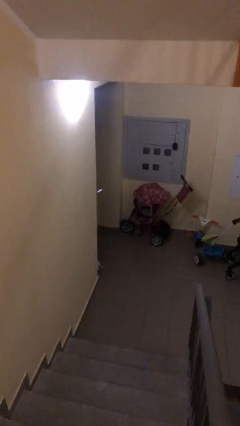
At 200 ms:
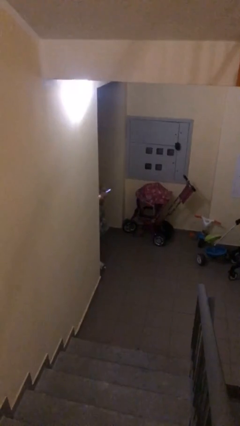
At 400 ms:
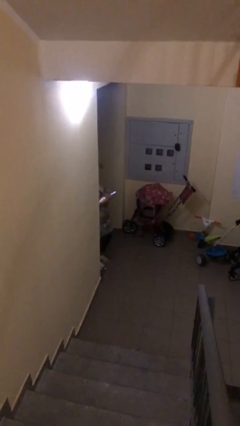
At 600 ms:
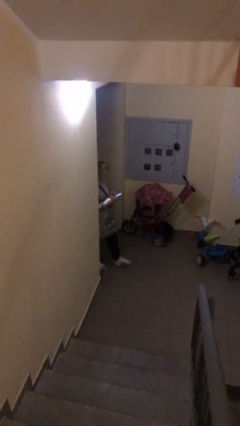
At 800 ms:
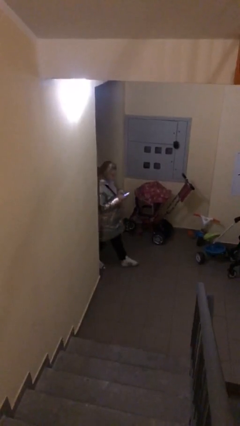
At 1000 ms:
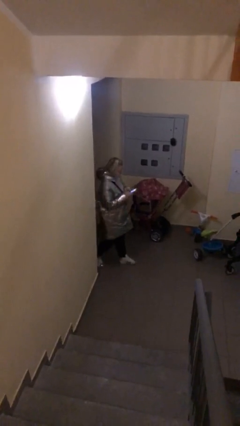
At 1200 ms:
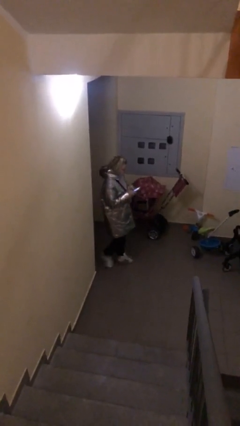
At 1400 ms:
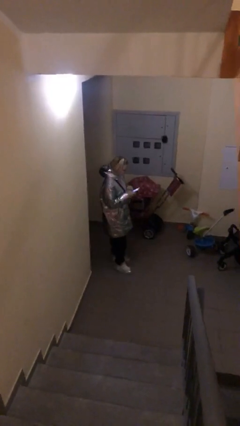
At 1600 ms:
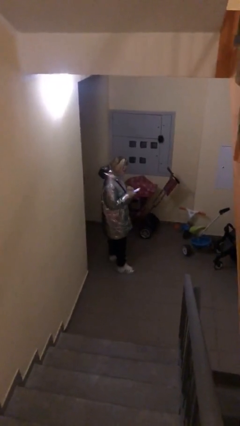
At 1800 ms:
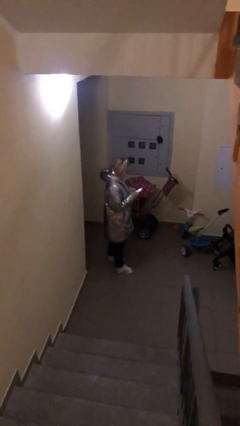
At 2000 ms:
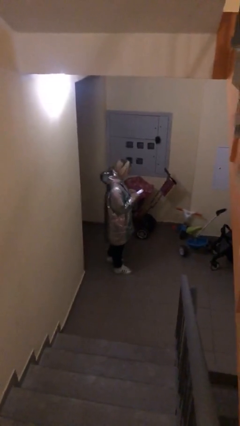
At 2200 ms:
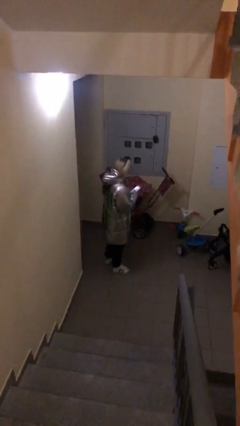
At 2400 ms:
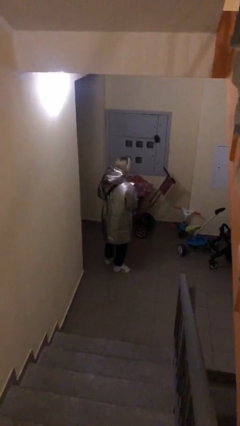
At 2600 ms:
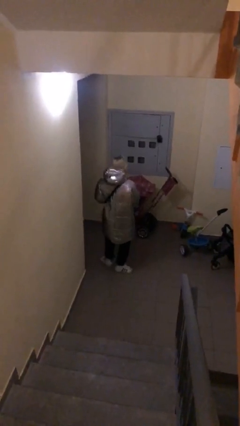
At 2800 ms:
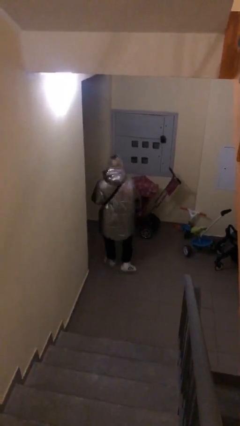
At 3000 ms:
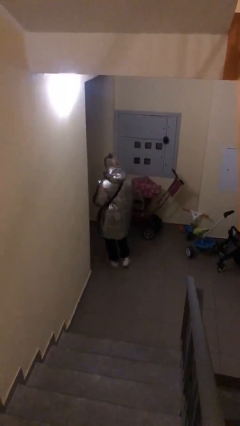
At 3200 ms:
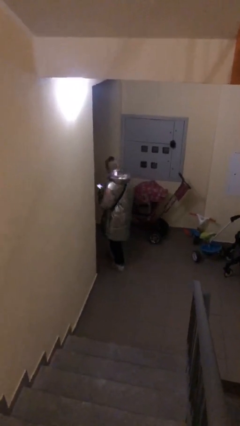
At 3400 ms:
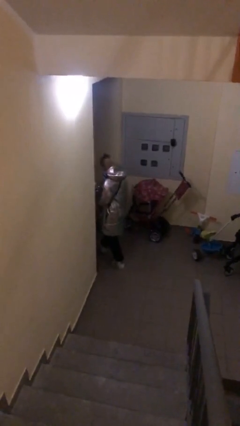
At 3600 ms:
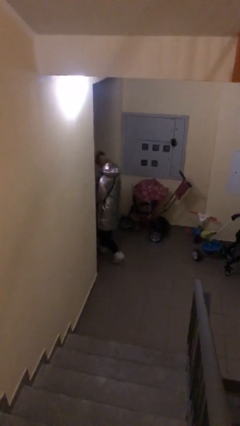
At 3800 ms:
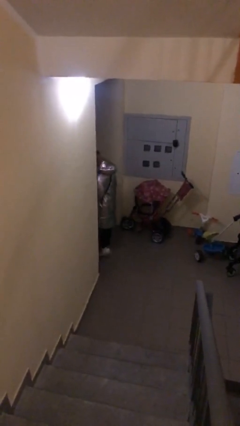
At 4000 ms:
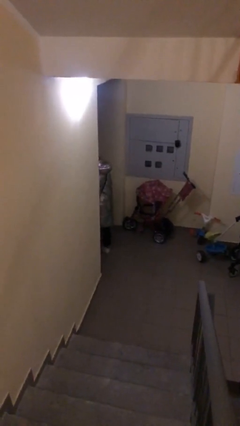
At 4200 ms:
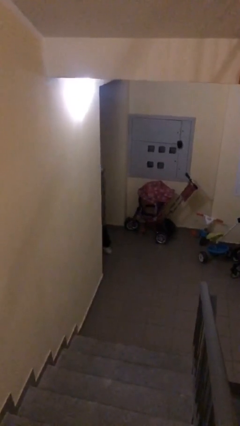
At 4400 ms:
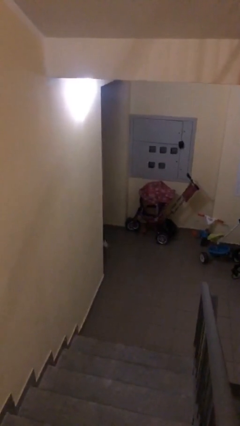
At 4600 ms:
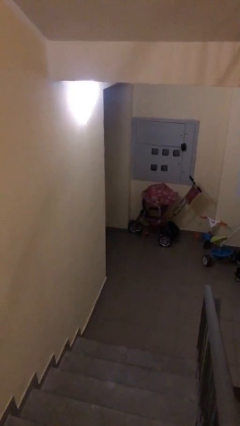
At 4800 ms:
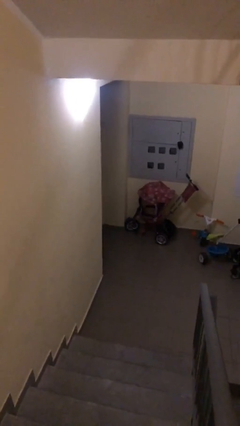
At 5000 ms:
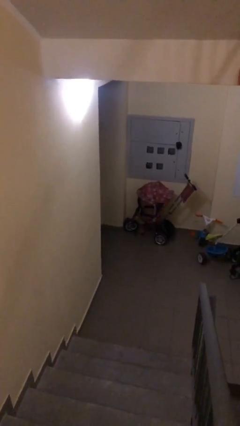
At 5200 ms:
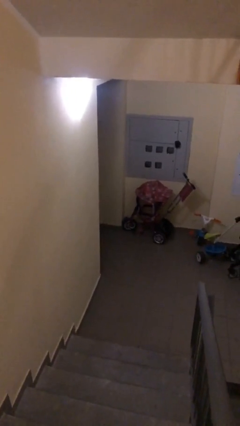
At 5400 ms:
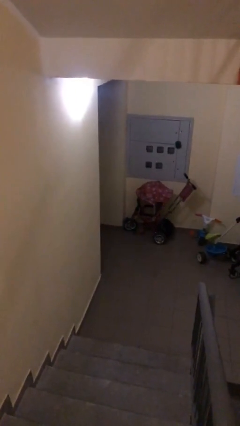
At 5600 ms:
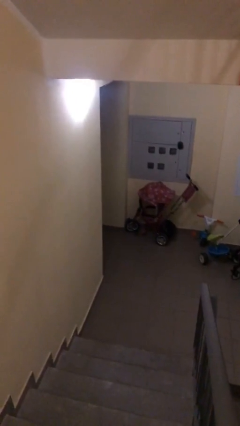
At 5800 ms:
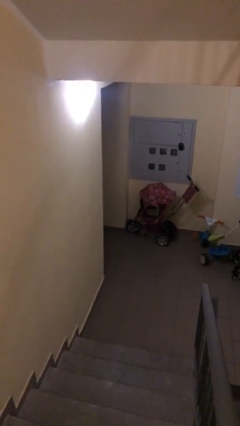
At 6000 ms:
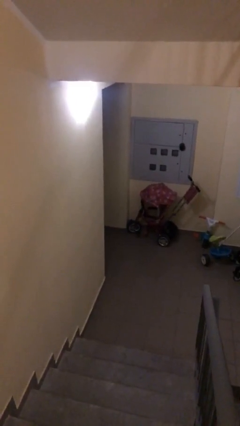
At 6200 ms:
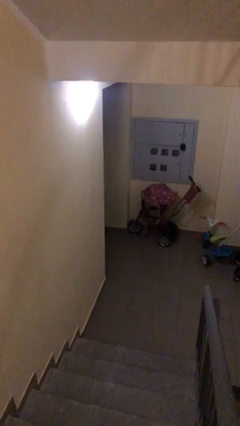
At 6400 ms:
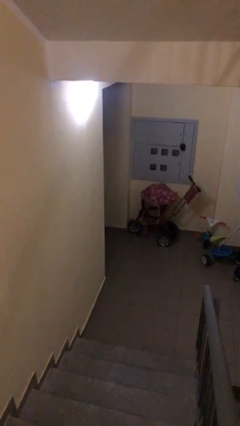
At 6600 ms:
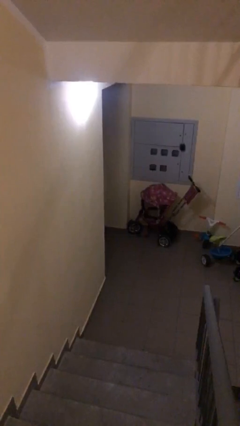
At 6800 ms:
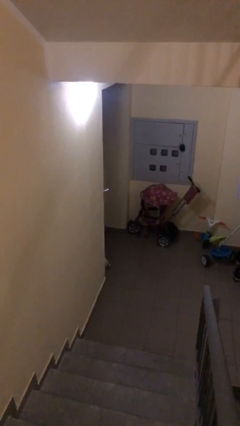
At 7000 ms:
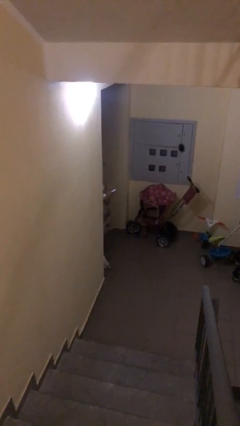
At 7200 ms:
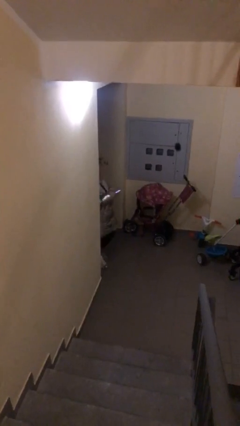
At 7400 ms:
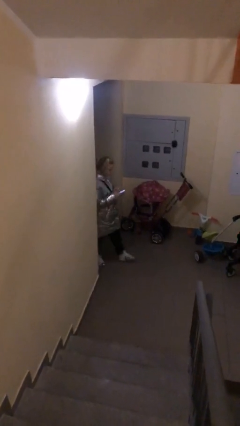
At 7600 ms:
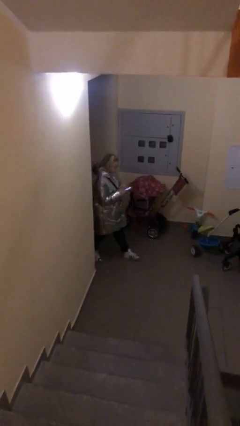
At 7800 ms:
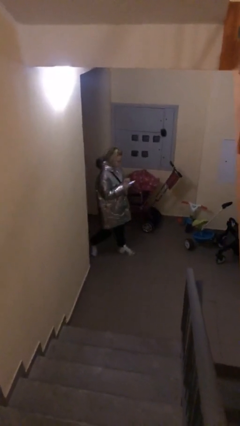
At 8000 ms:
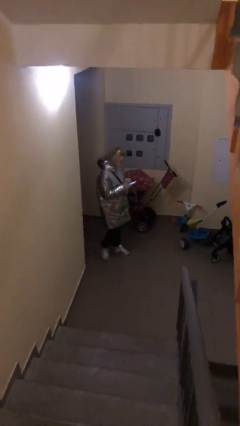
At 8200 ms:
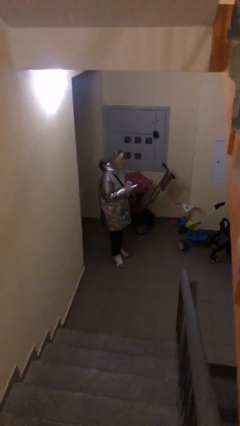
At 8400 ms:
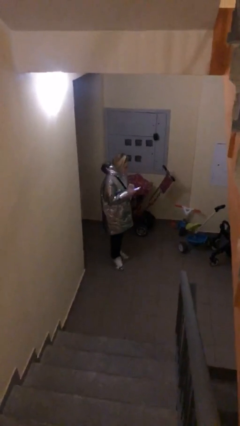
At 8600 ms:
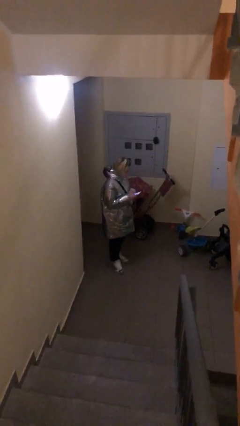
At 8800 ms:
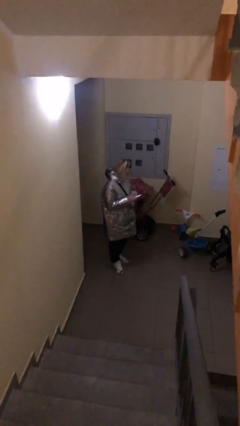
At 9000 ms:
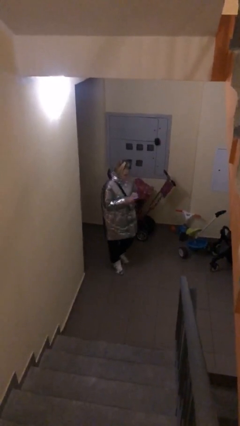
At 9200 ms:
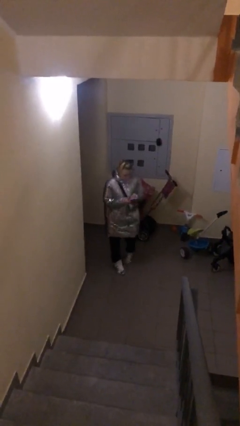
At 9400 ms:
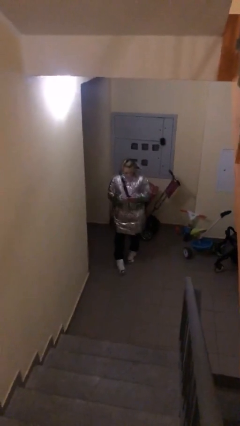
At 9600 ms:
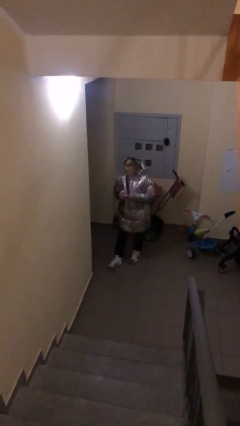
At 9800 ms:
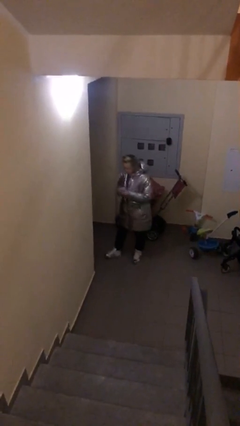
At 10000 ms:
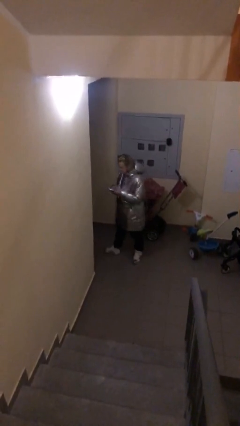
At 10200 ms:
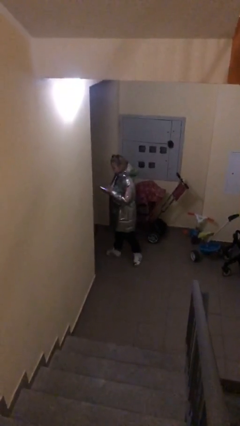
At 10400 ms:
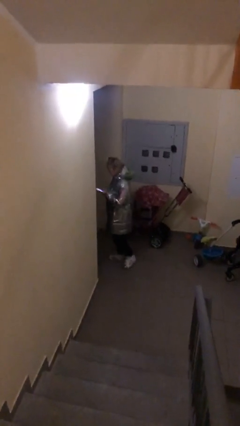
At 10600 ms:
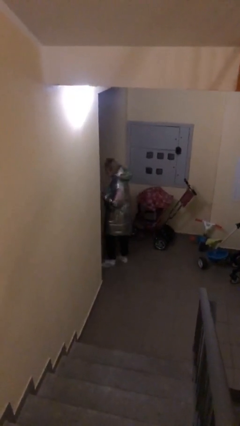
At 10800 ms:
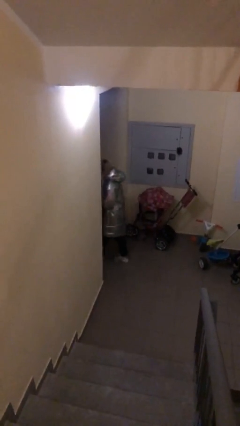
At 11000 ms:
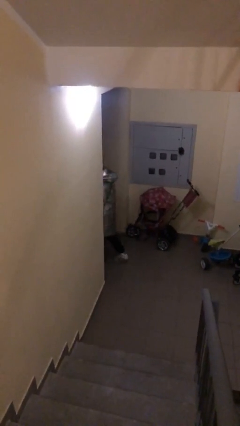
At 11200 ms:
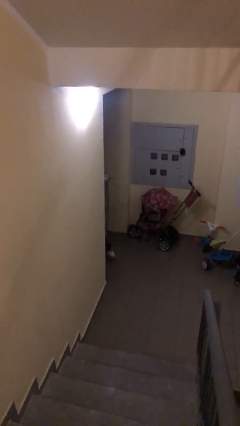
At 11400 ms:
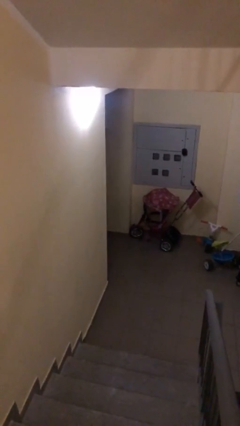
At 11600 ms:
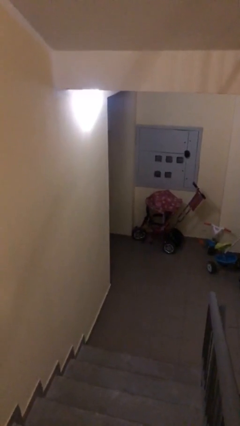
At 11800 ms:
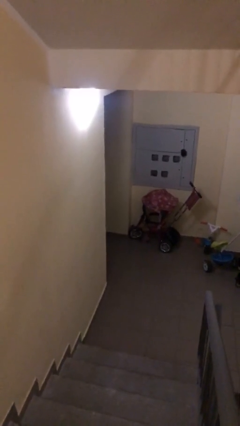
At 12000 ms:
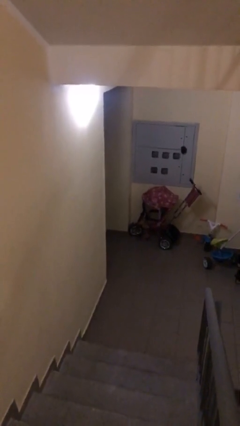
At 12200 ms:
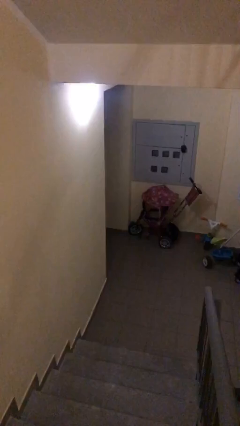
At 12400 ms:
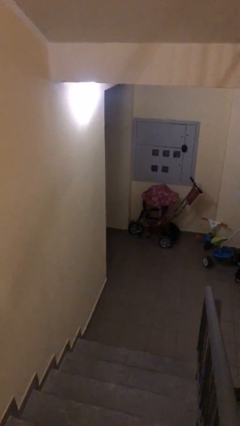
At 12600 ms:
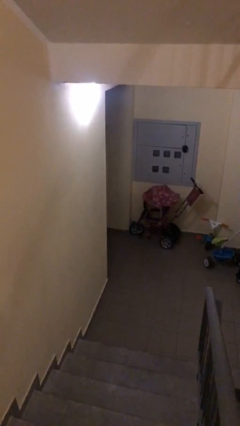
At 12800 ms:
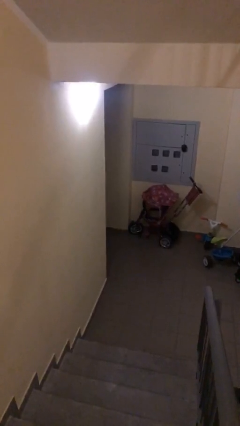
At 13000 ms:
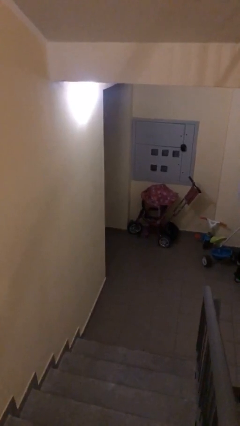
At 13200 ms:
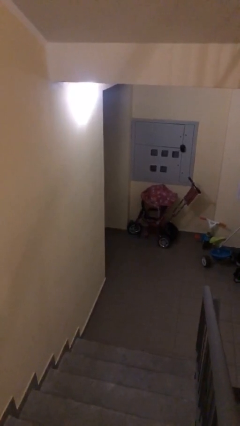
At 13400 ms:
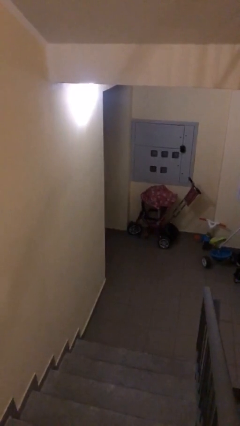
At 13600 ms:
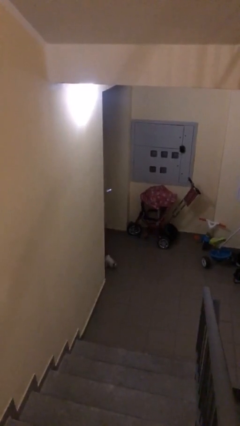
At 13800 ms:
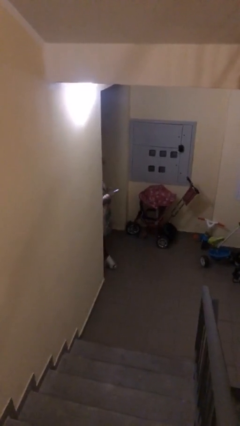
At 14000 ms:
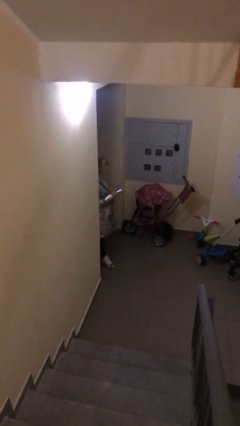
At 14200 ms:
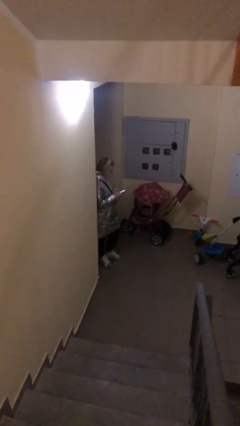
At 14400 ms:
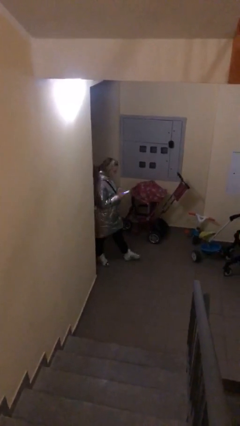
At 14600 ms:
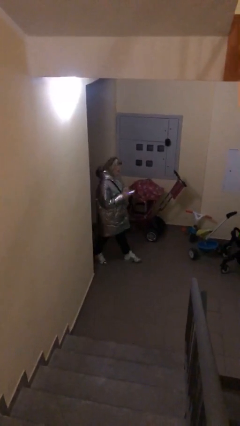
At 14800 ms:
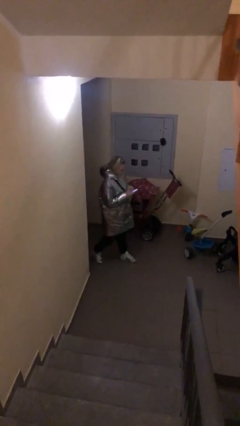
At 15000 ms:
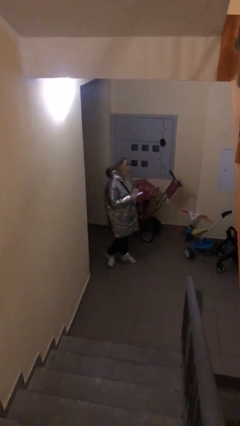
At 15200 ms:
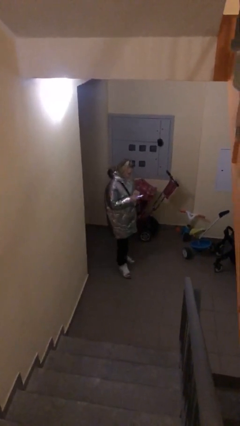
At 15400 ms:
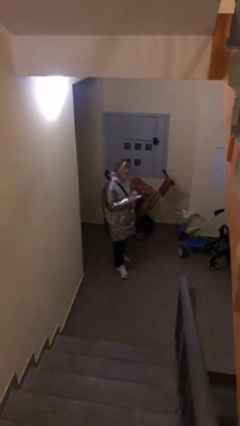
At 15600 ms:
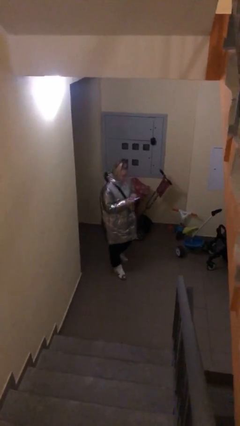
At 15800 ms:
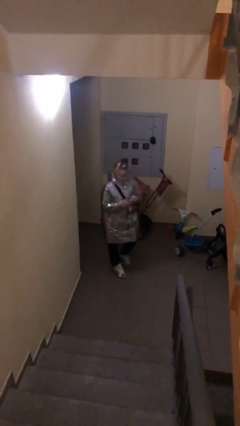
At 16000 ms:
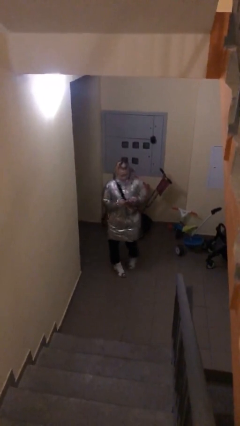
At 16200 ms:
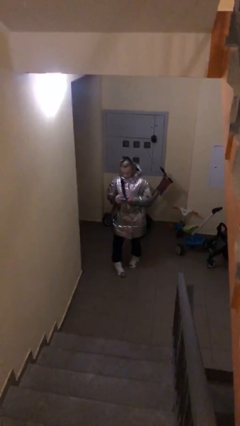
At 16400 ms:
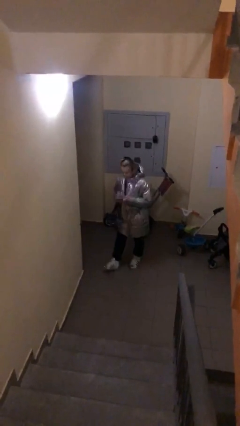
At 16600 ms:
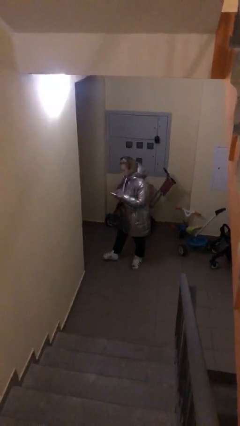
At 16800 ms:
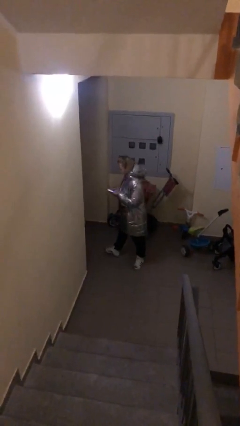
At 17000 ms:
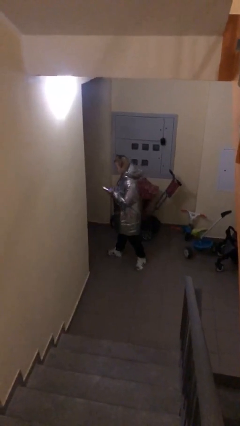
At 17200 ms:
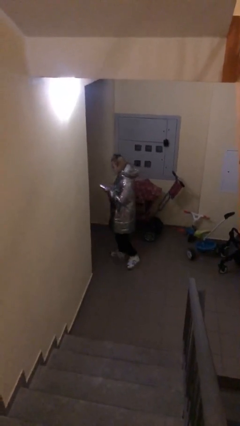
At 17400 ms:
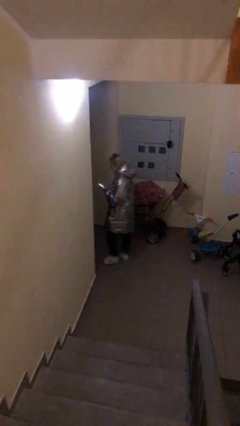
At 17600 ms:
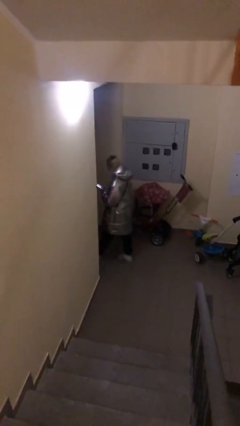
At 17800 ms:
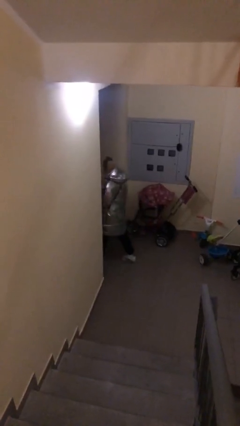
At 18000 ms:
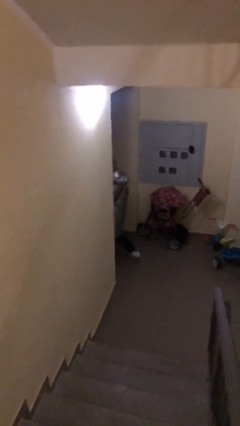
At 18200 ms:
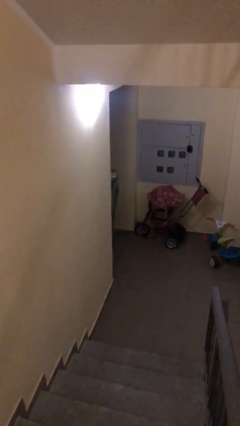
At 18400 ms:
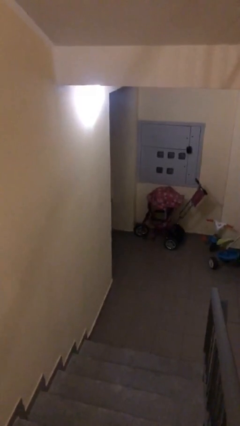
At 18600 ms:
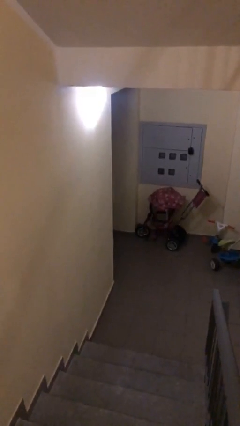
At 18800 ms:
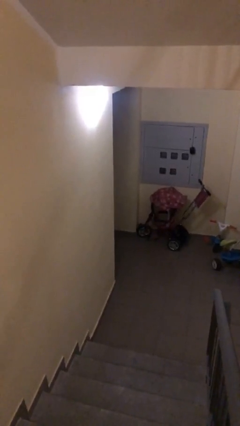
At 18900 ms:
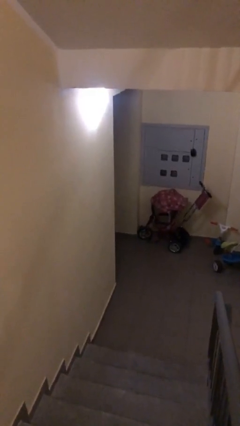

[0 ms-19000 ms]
person texts on phone
